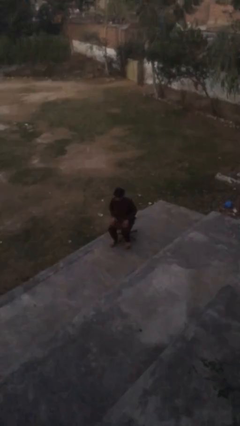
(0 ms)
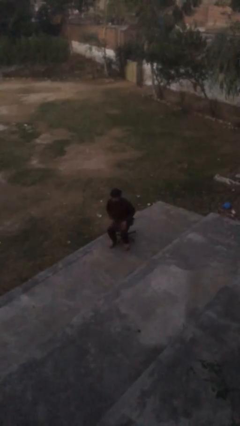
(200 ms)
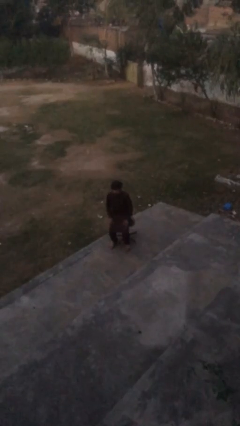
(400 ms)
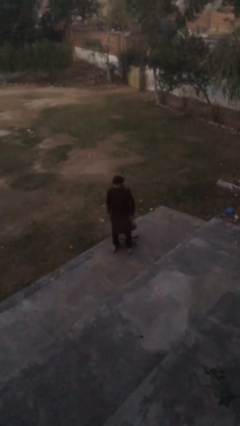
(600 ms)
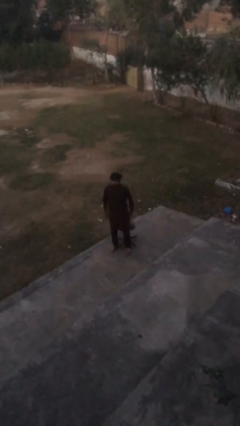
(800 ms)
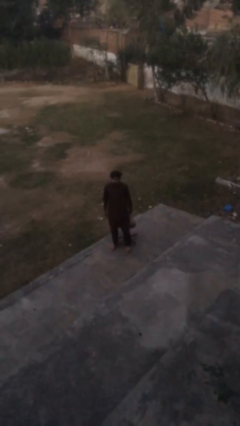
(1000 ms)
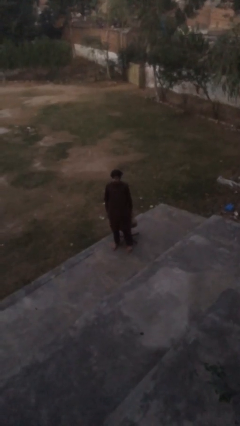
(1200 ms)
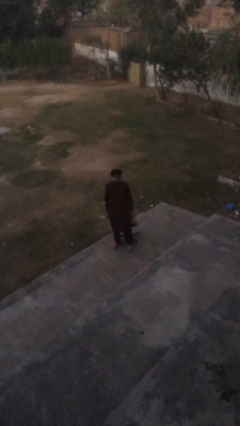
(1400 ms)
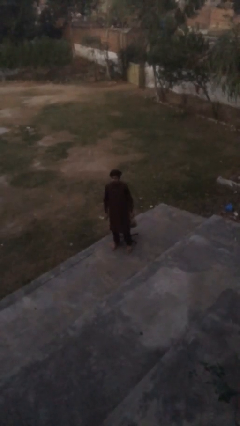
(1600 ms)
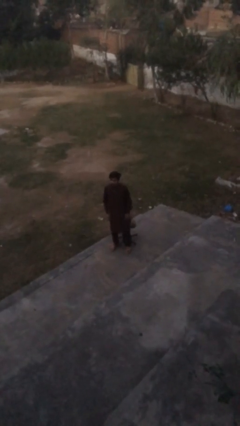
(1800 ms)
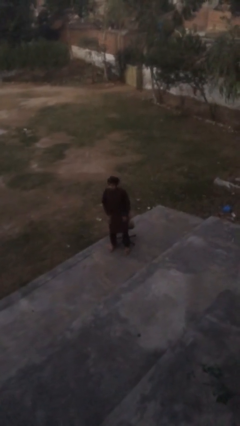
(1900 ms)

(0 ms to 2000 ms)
person stands up

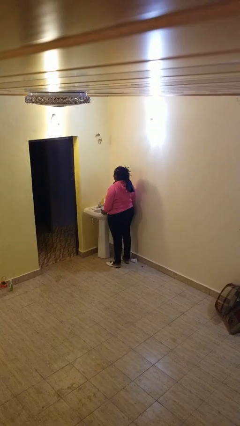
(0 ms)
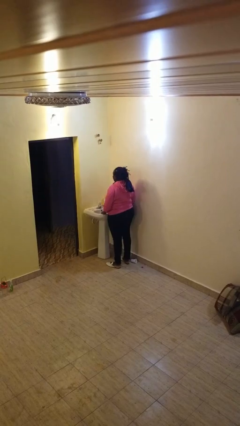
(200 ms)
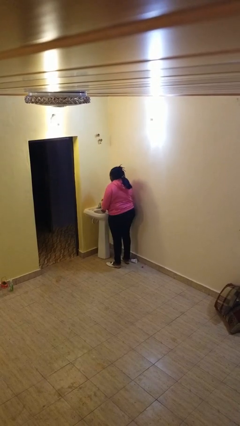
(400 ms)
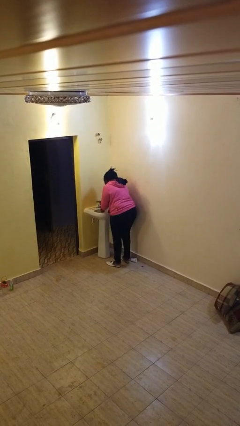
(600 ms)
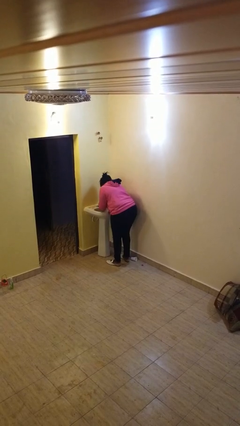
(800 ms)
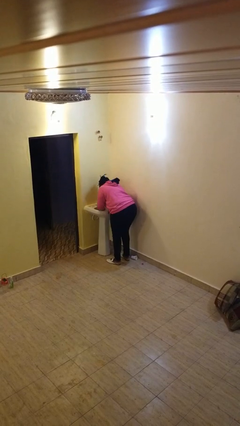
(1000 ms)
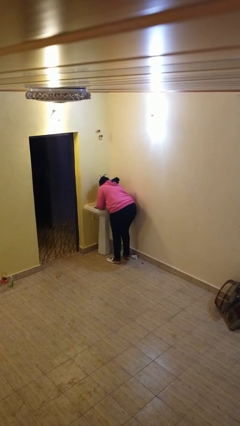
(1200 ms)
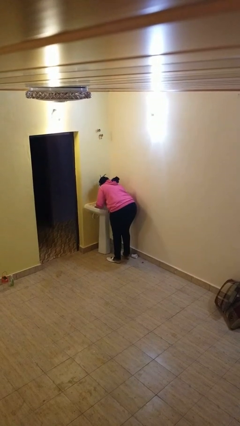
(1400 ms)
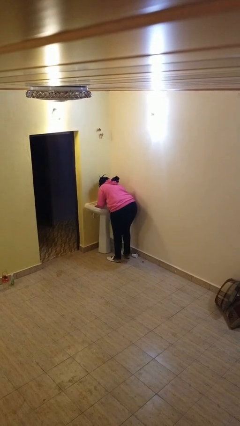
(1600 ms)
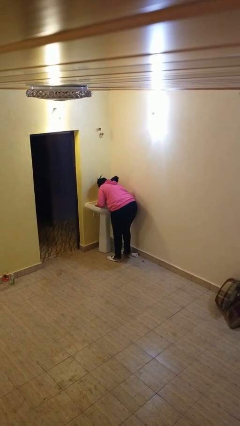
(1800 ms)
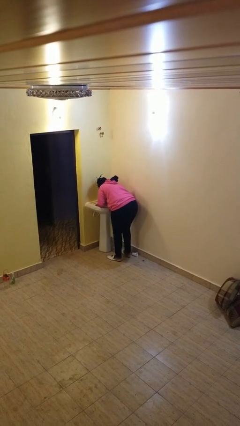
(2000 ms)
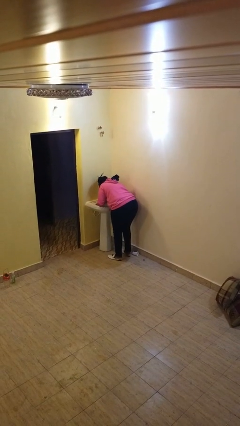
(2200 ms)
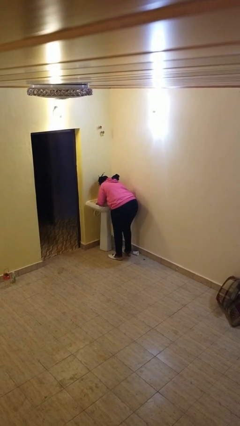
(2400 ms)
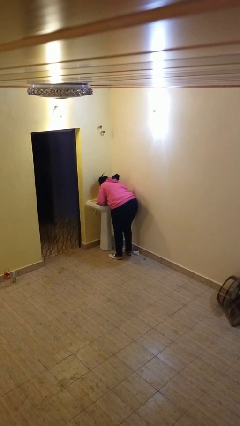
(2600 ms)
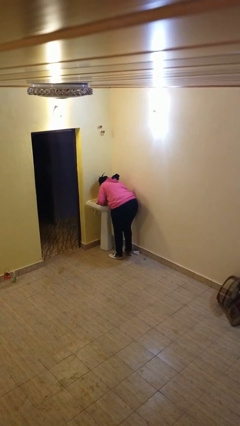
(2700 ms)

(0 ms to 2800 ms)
person washes face

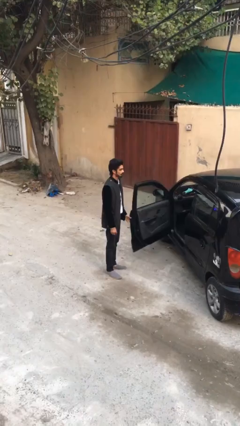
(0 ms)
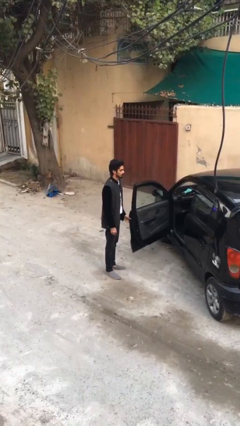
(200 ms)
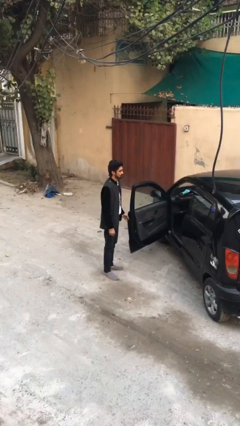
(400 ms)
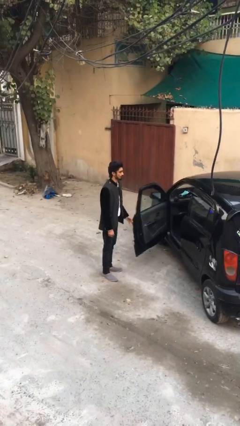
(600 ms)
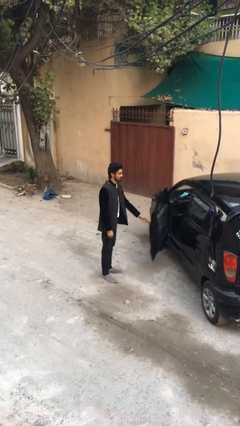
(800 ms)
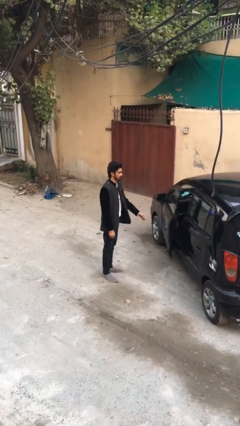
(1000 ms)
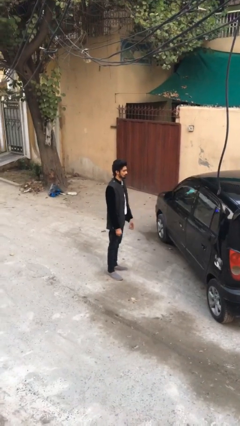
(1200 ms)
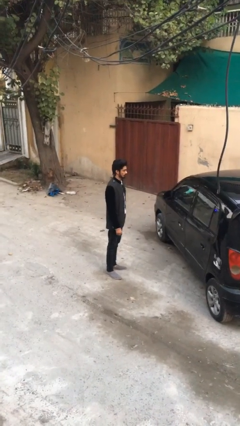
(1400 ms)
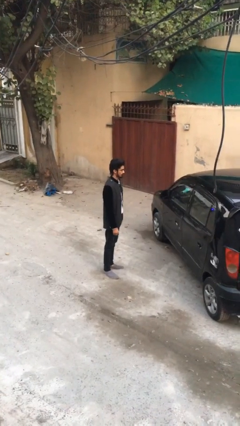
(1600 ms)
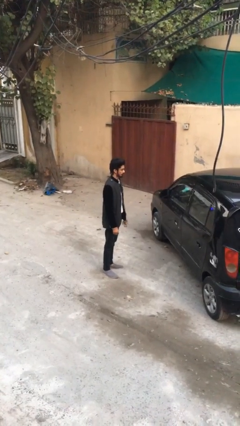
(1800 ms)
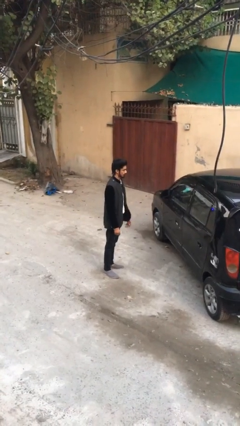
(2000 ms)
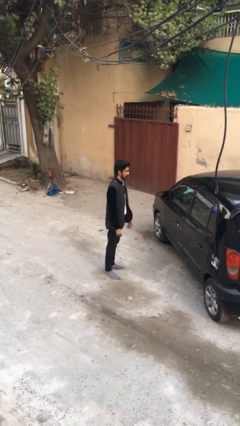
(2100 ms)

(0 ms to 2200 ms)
person closes car door

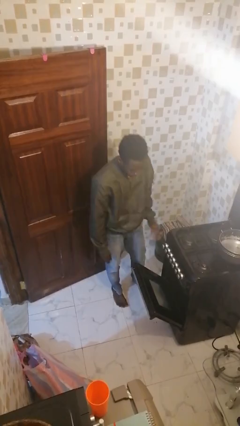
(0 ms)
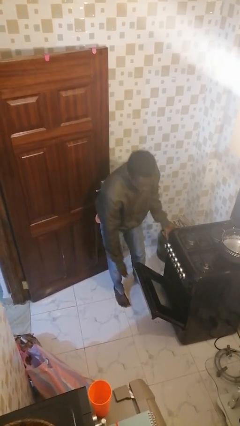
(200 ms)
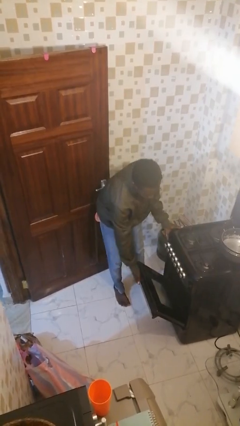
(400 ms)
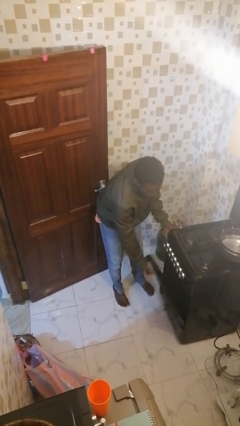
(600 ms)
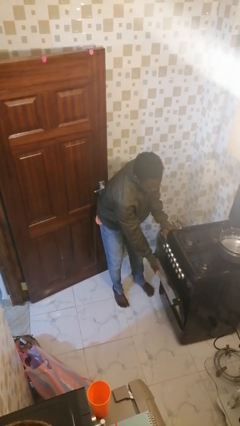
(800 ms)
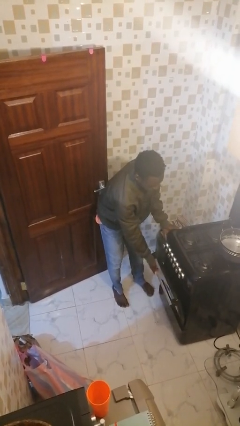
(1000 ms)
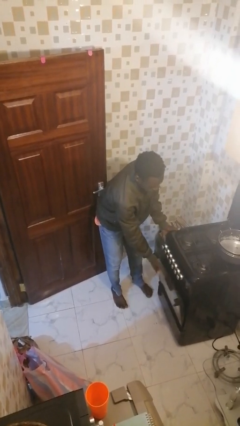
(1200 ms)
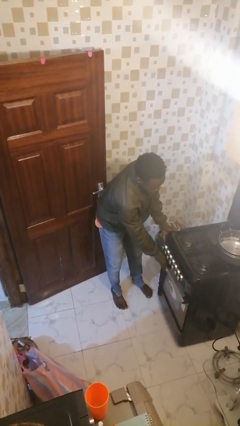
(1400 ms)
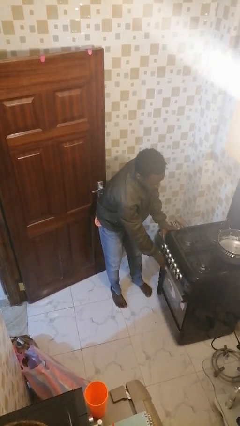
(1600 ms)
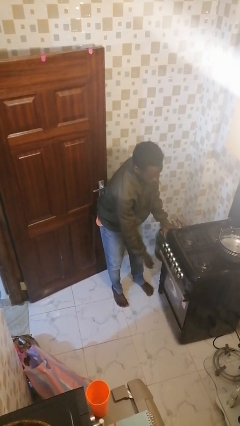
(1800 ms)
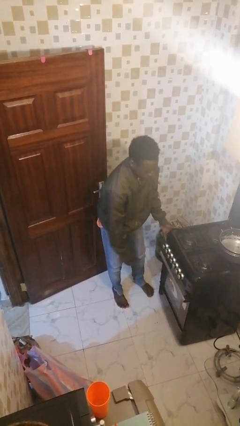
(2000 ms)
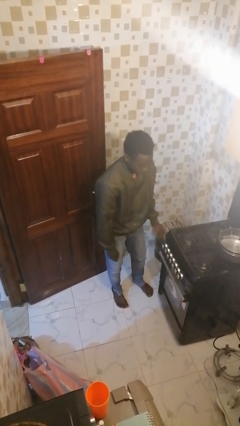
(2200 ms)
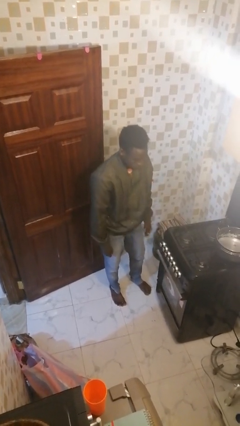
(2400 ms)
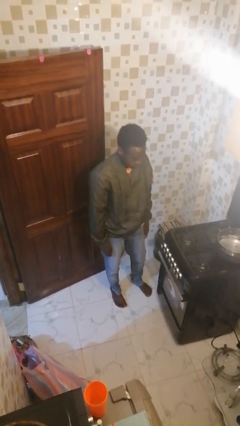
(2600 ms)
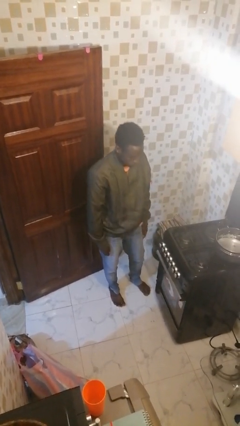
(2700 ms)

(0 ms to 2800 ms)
person closes oven door

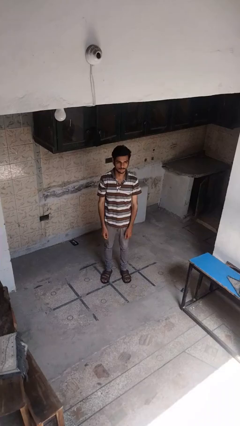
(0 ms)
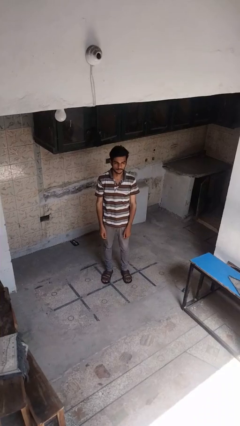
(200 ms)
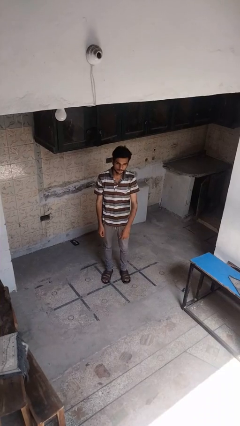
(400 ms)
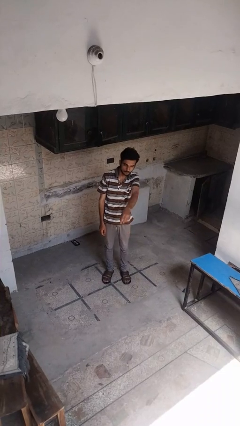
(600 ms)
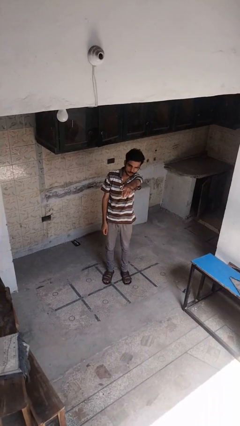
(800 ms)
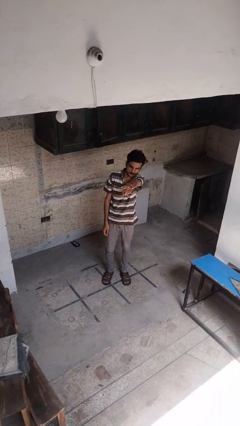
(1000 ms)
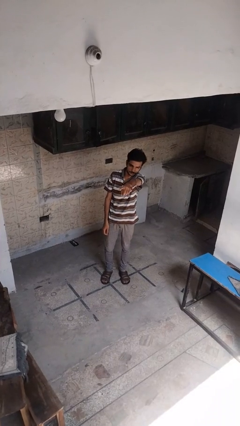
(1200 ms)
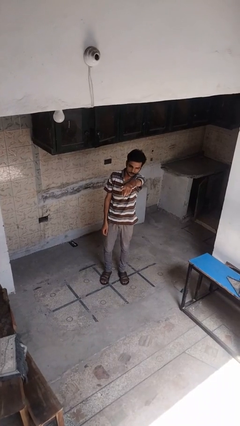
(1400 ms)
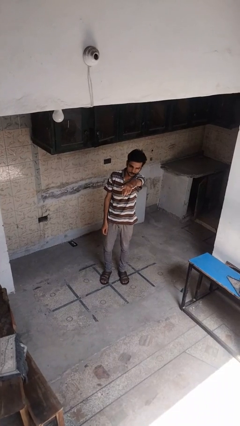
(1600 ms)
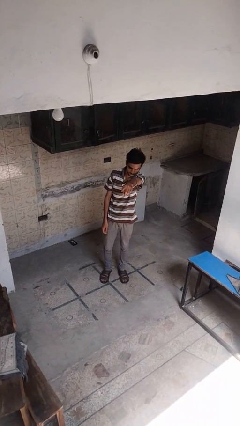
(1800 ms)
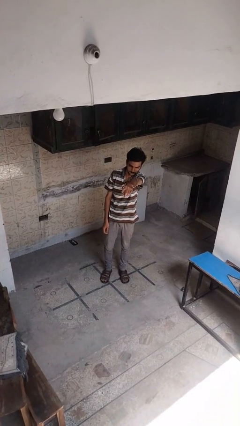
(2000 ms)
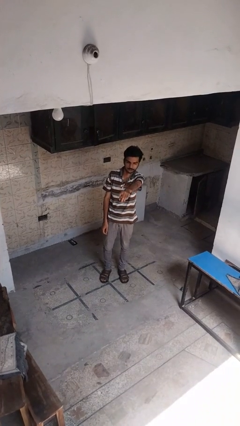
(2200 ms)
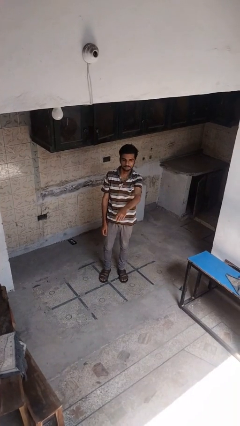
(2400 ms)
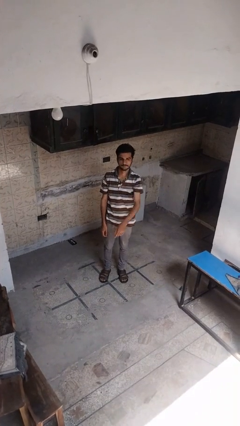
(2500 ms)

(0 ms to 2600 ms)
person points at person

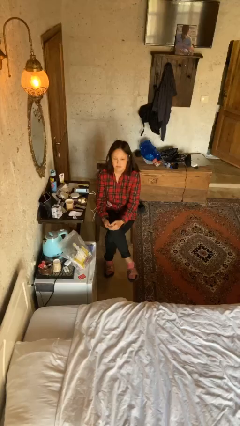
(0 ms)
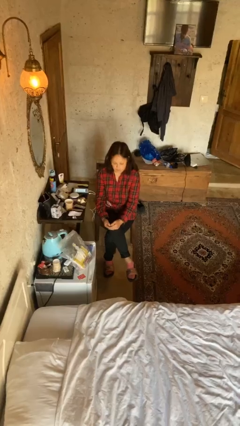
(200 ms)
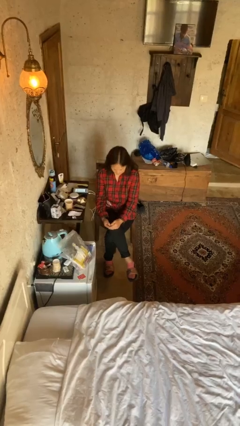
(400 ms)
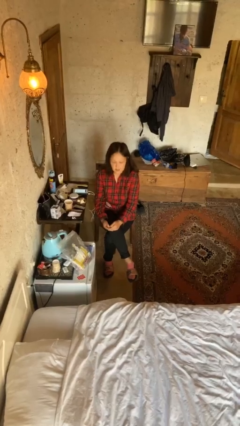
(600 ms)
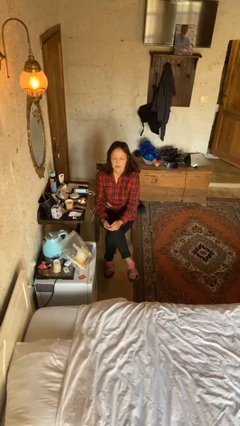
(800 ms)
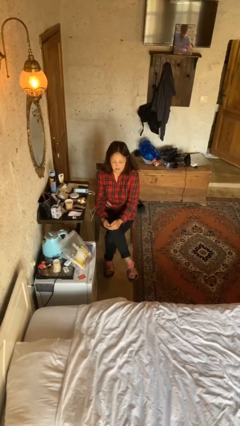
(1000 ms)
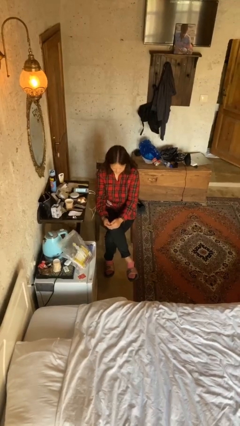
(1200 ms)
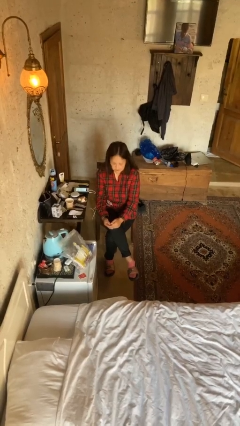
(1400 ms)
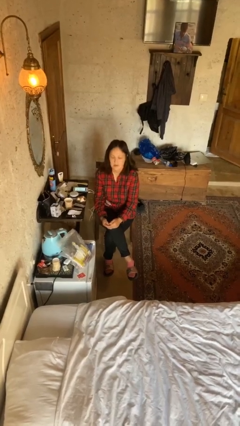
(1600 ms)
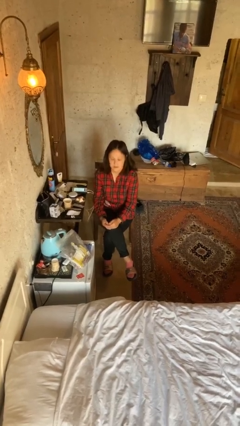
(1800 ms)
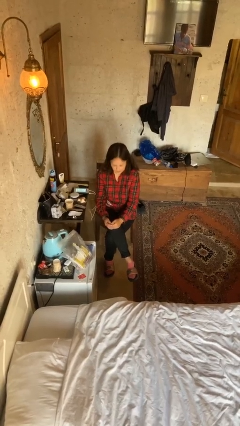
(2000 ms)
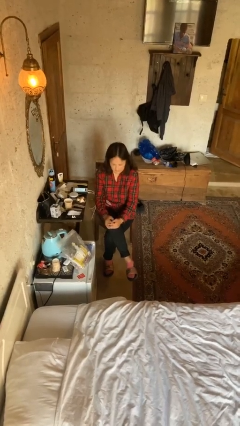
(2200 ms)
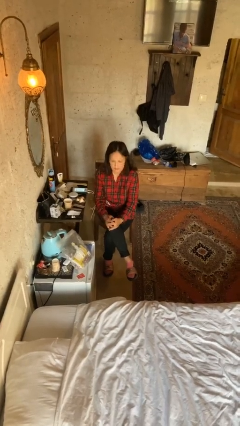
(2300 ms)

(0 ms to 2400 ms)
person nods head

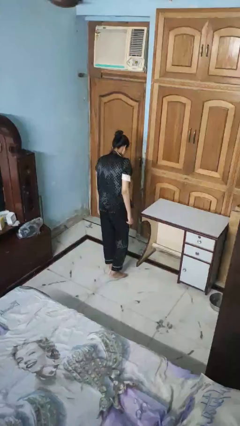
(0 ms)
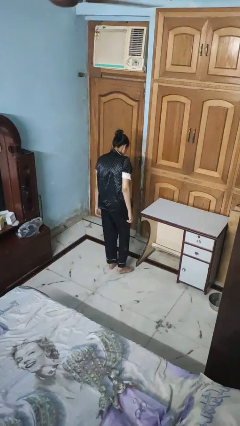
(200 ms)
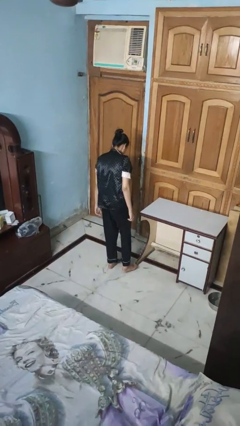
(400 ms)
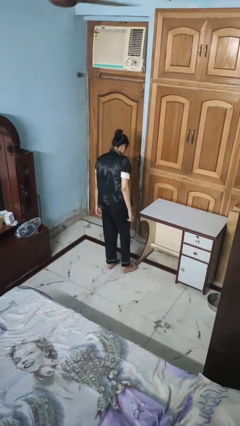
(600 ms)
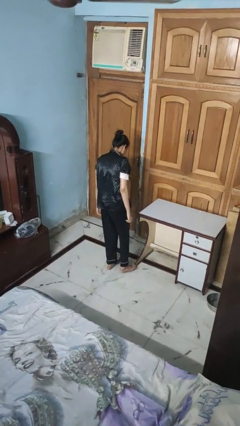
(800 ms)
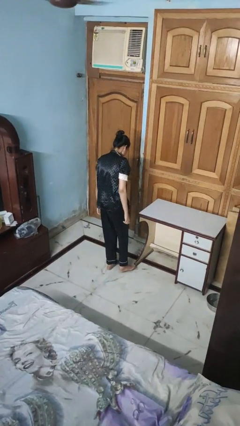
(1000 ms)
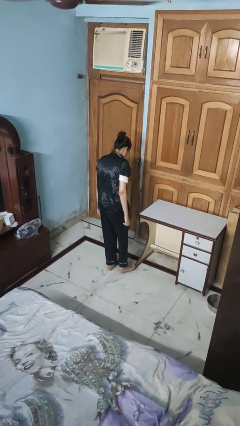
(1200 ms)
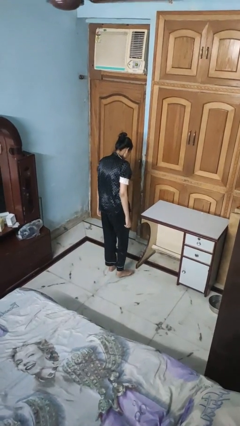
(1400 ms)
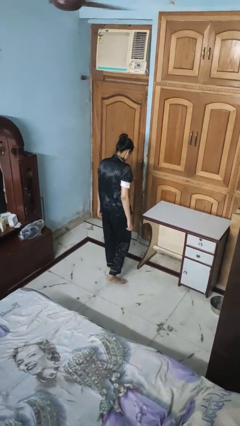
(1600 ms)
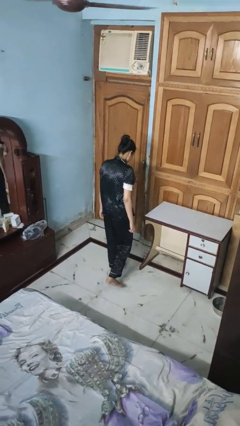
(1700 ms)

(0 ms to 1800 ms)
person stubs toe

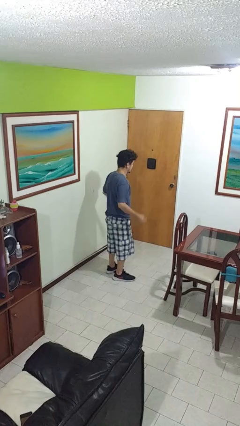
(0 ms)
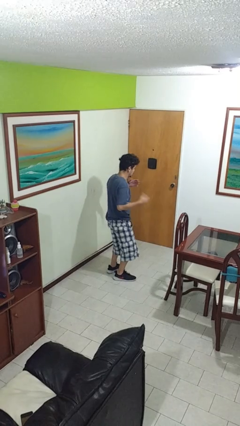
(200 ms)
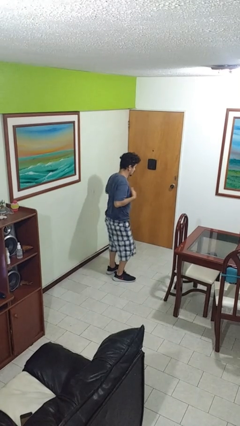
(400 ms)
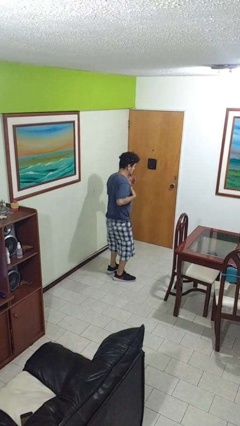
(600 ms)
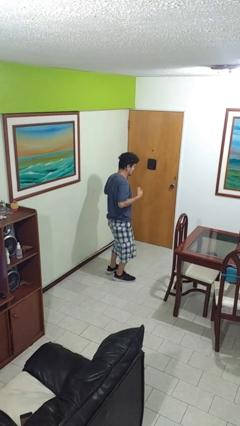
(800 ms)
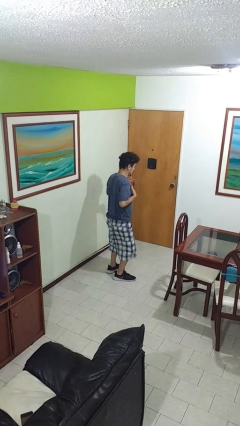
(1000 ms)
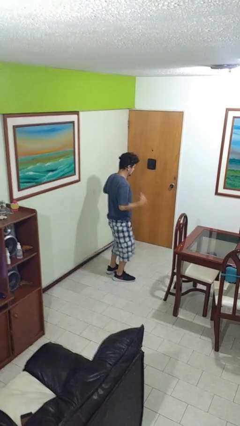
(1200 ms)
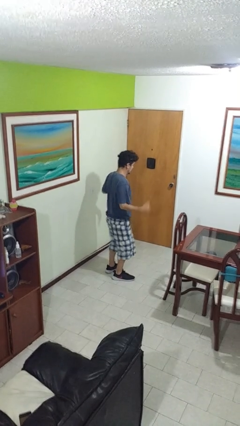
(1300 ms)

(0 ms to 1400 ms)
person drums on chest
